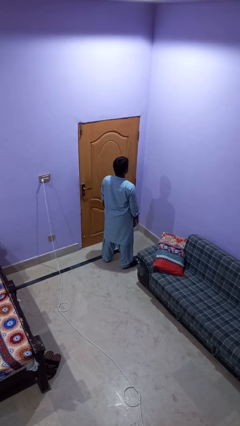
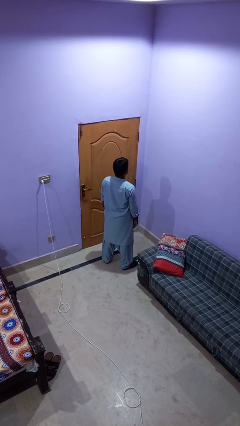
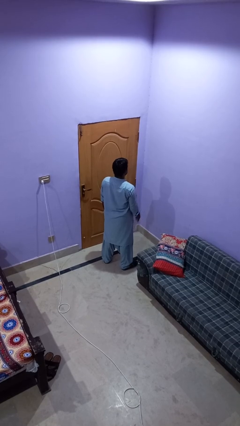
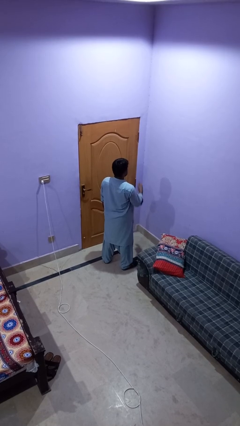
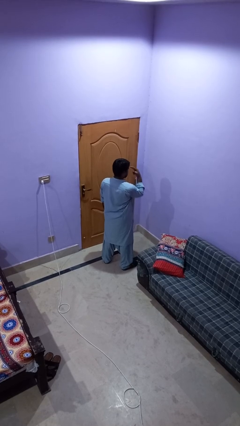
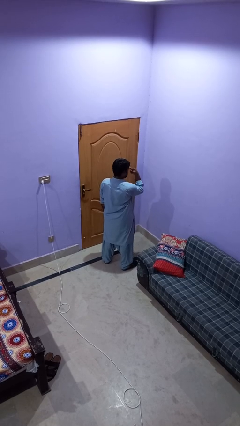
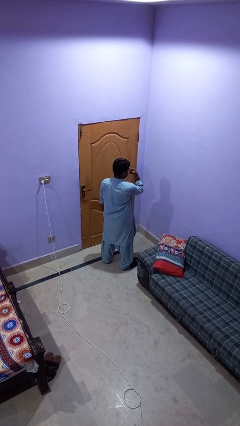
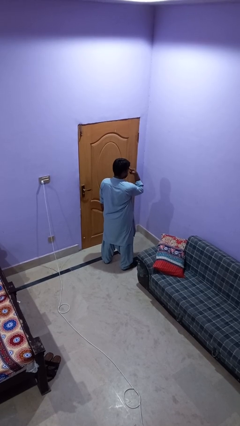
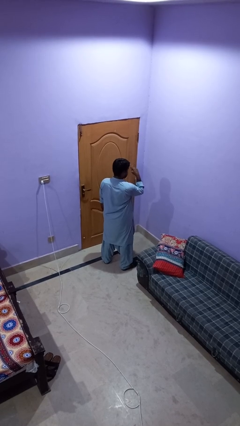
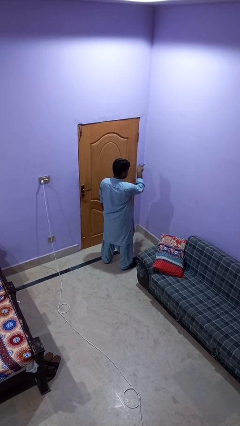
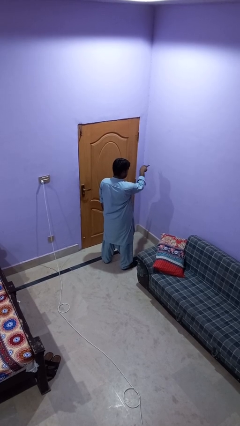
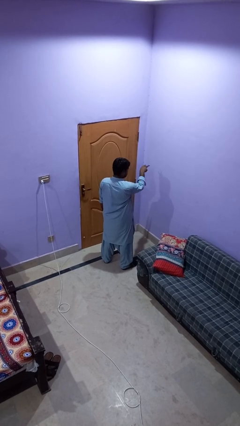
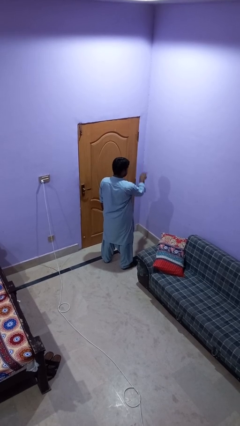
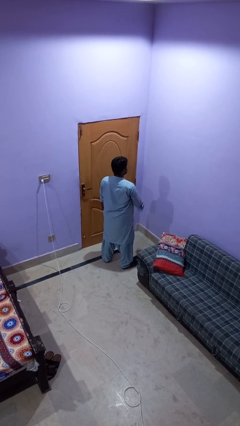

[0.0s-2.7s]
person gestures watch closely

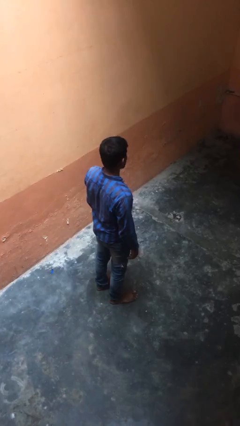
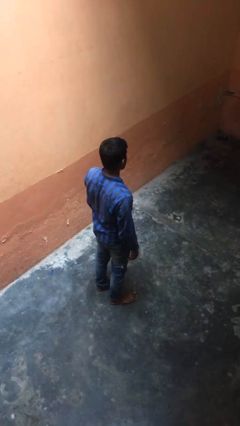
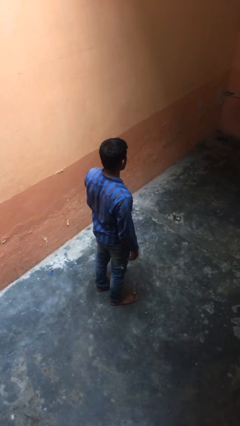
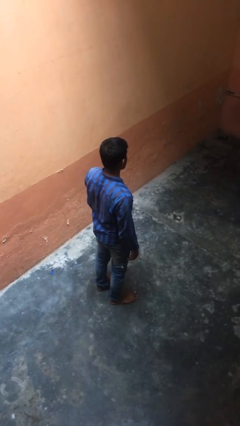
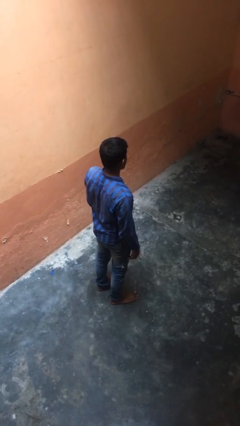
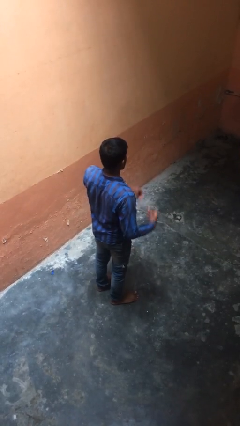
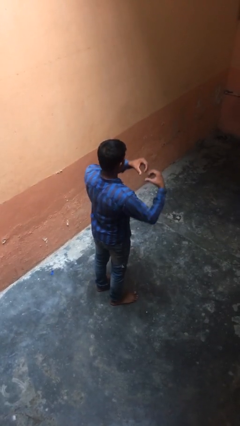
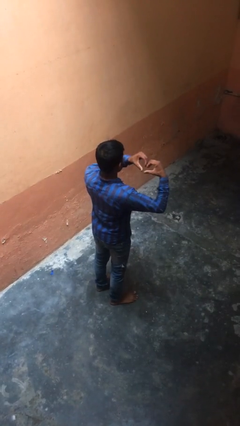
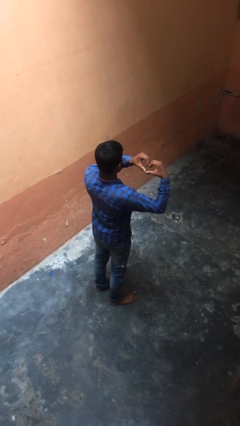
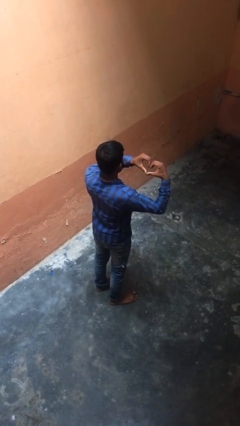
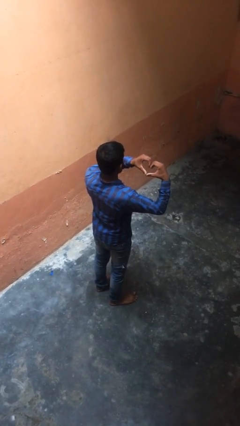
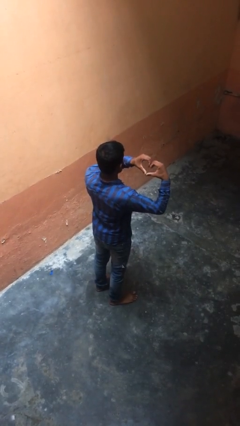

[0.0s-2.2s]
person gestures heart

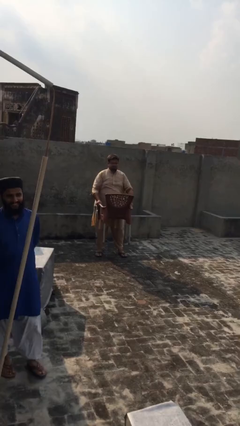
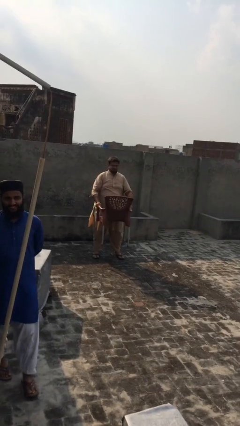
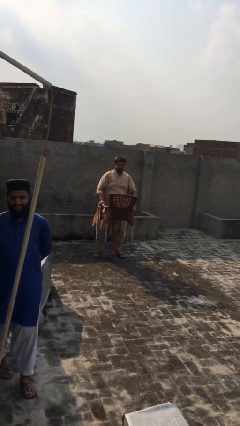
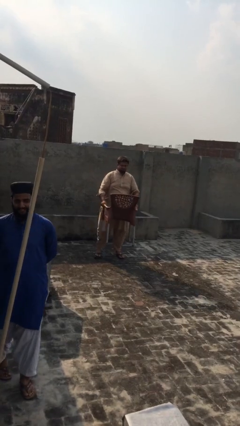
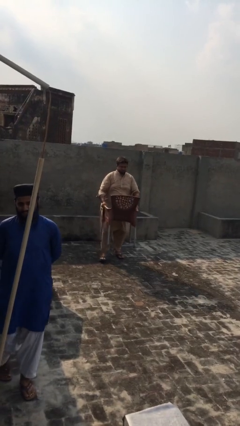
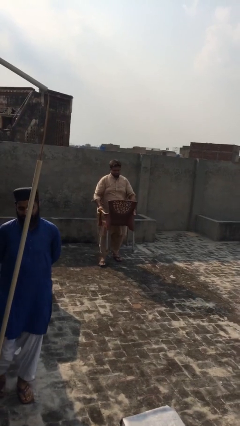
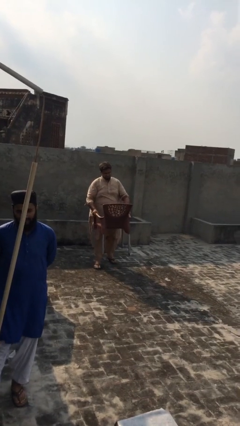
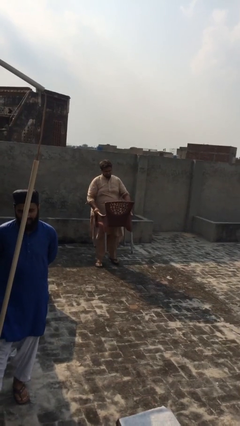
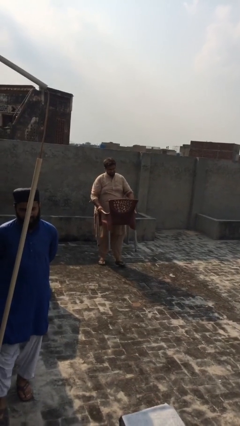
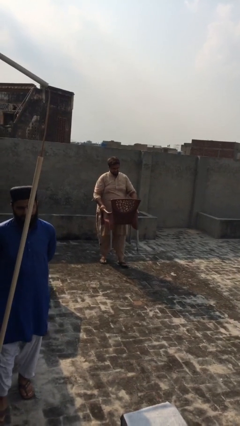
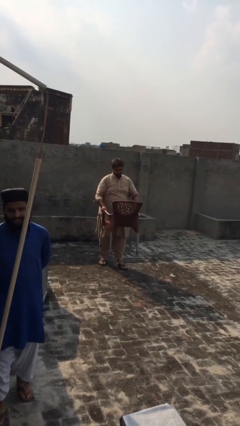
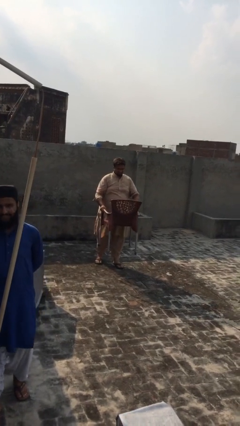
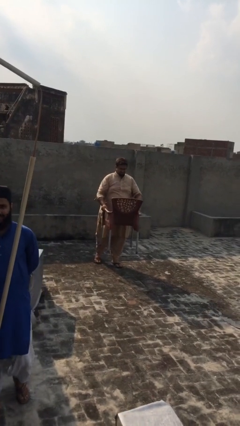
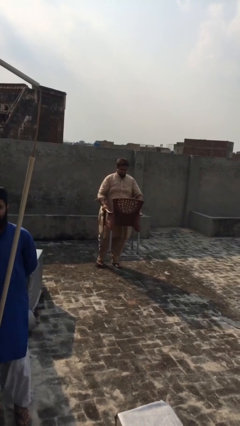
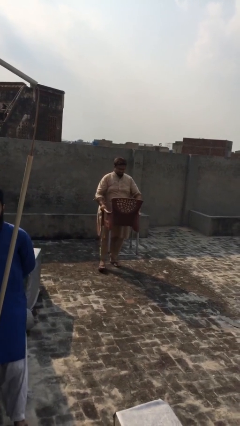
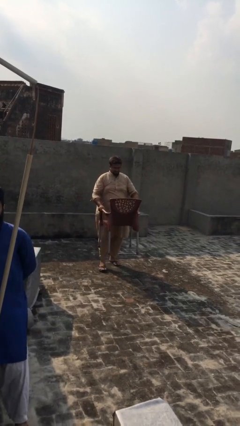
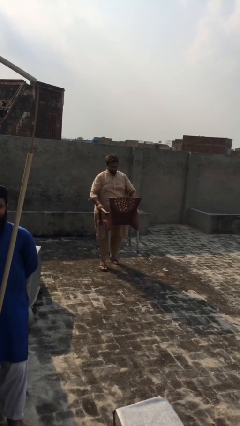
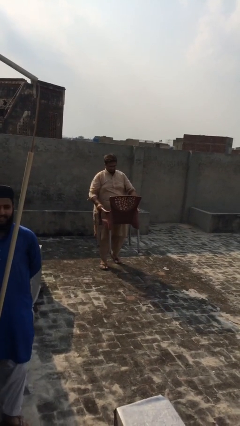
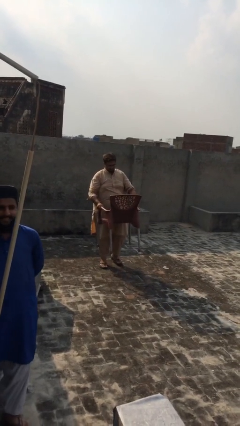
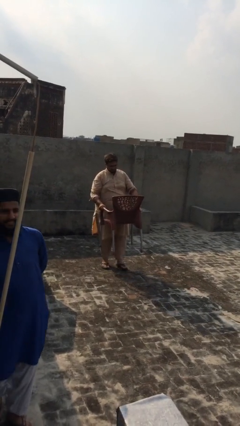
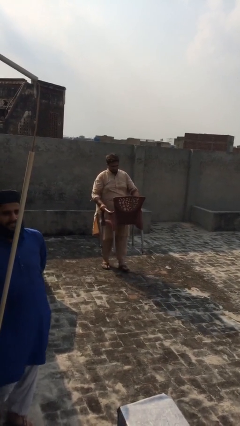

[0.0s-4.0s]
person carries heavy object

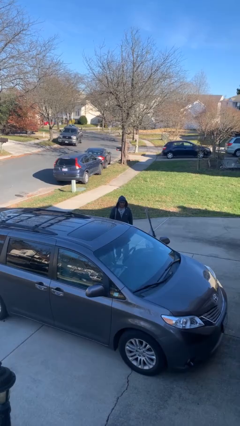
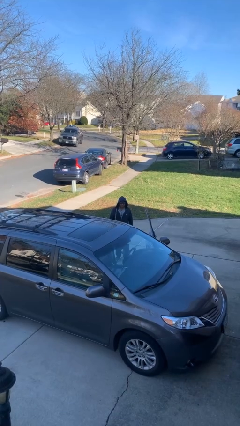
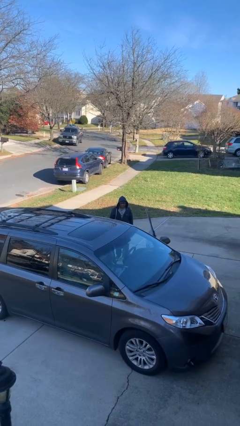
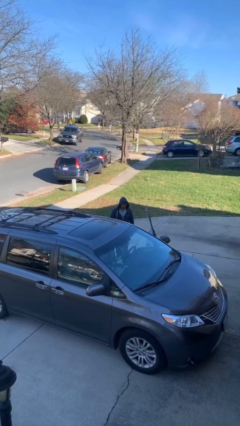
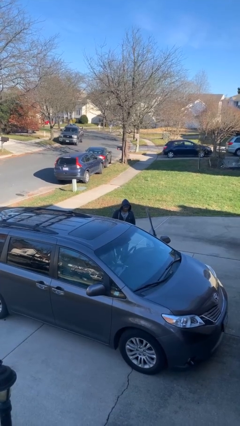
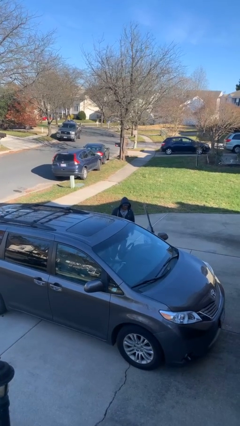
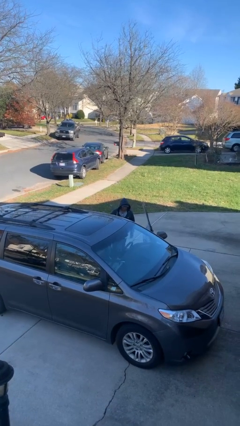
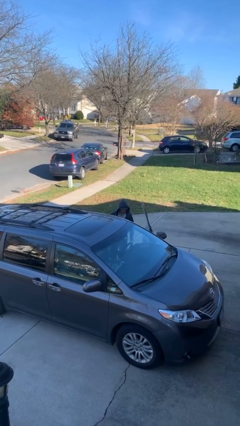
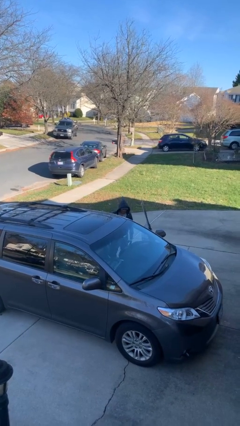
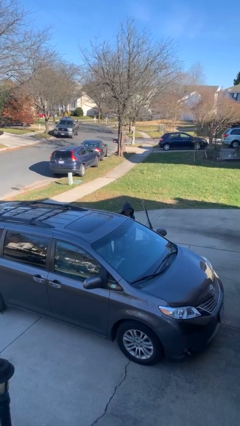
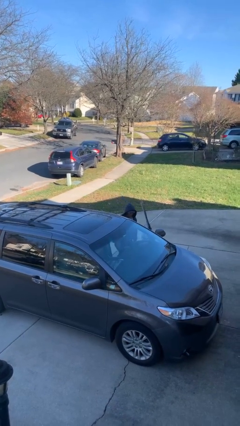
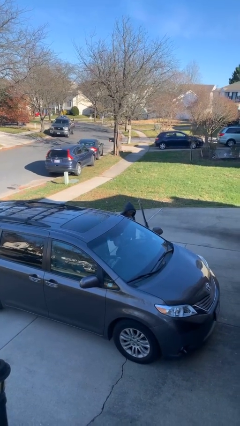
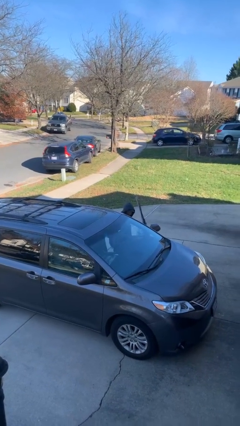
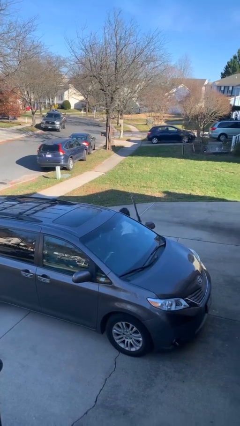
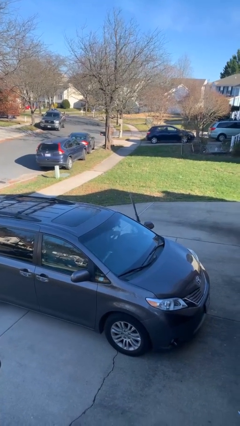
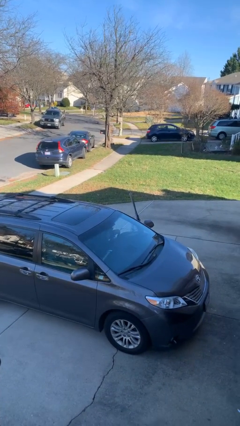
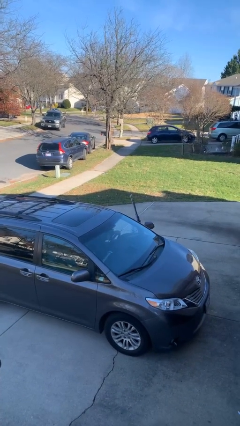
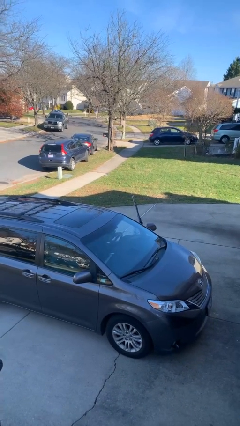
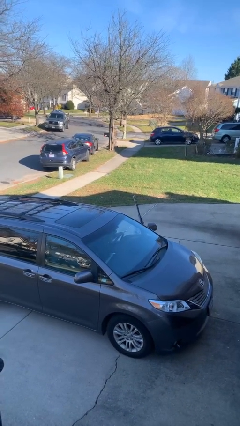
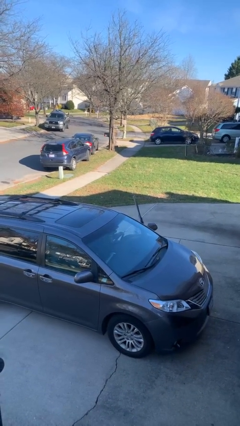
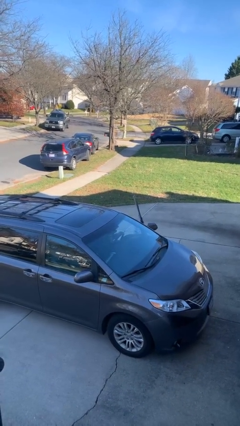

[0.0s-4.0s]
person enters car

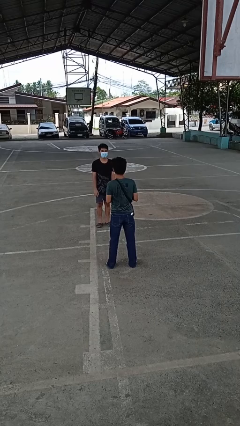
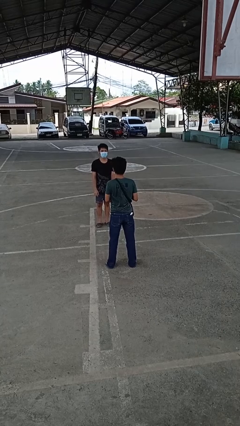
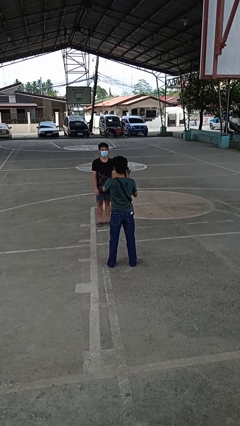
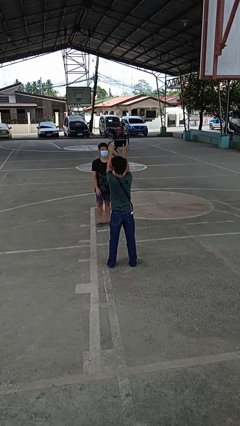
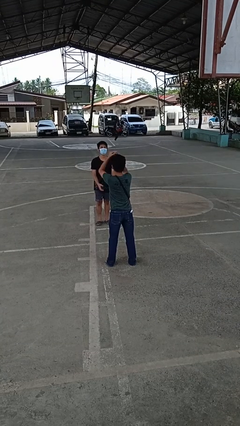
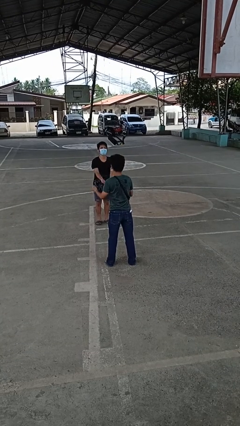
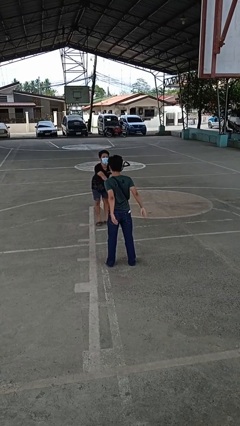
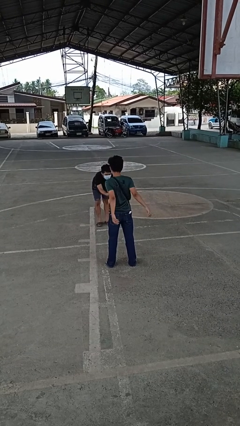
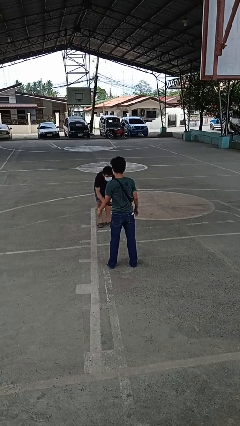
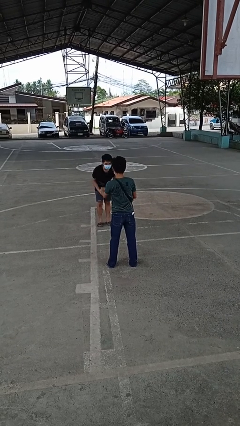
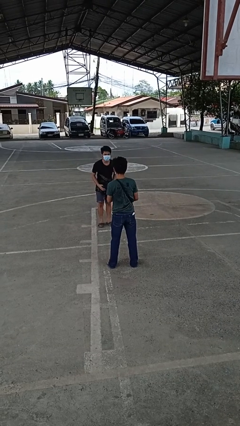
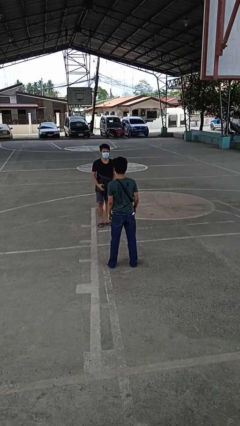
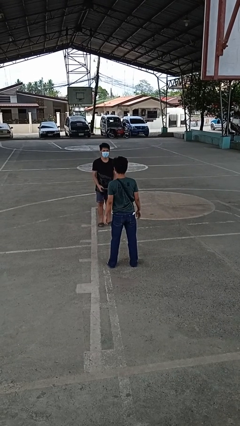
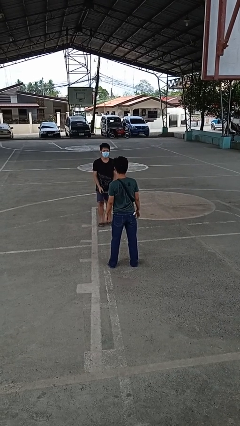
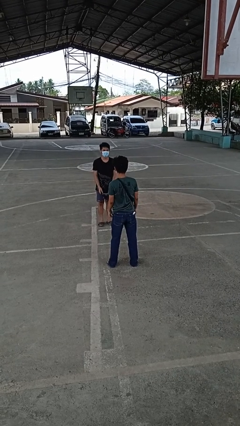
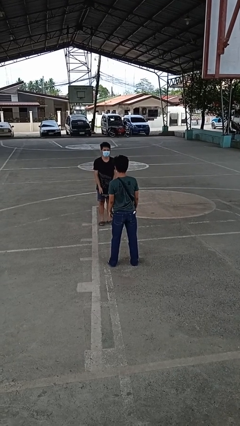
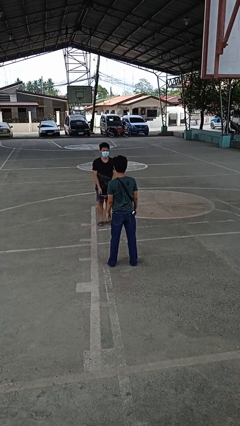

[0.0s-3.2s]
person throws object to person

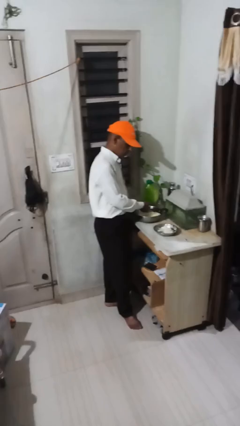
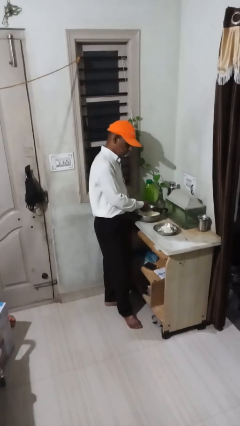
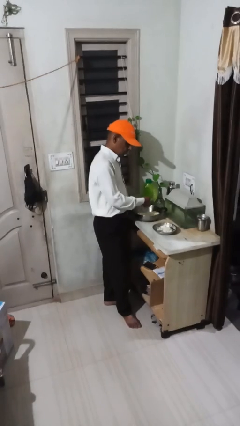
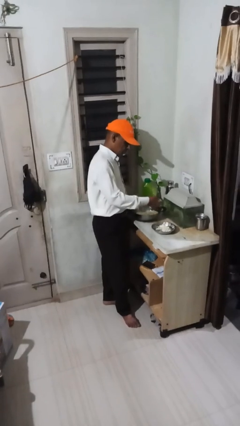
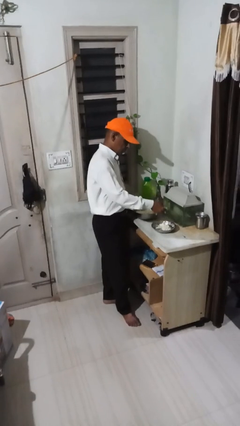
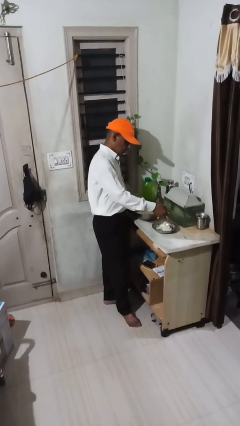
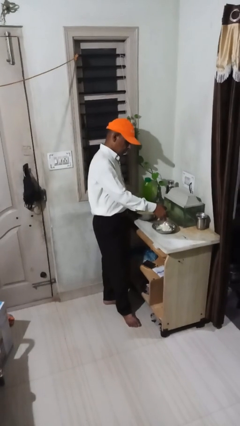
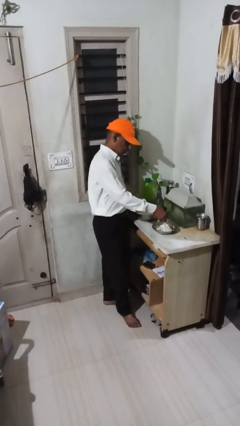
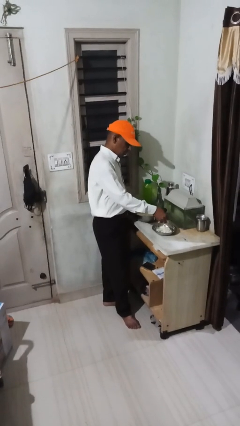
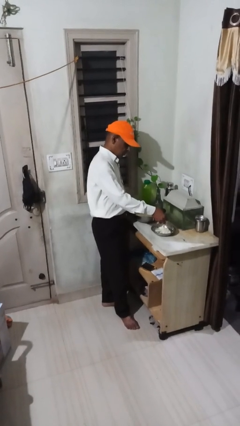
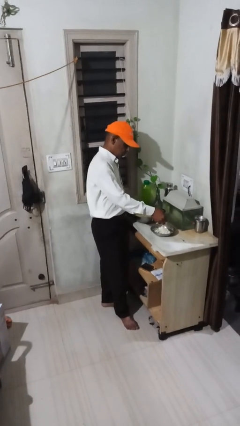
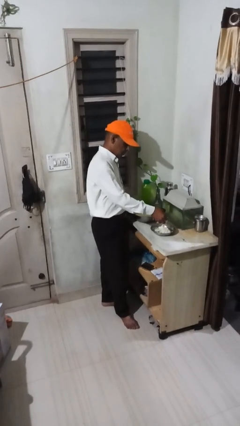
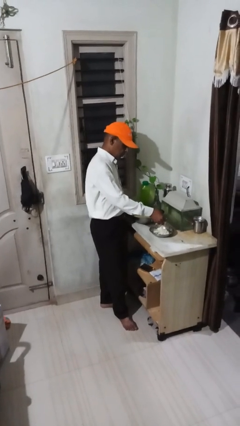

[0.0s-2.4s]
person pours into bowl
